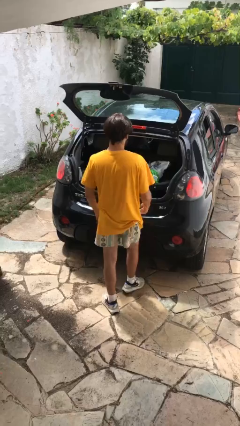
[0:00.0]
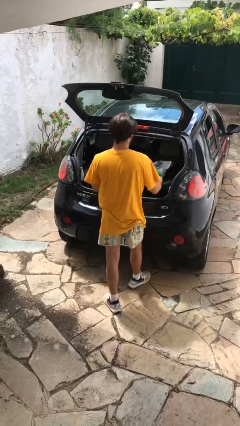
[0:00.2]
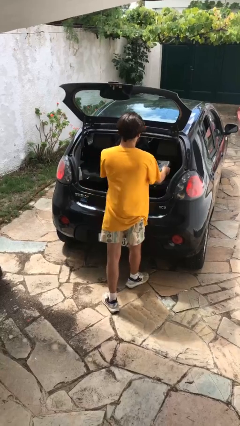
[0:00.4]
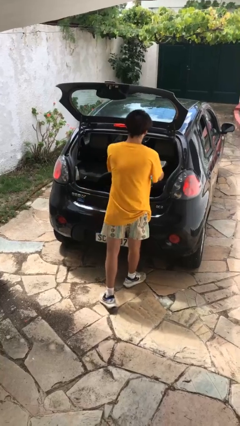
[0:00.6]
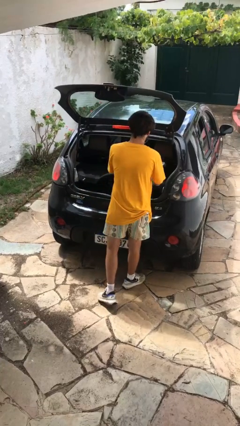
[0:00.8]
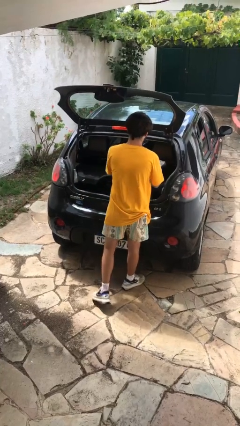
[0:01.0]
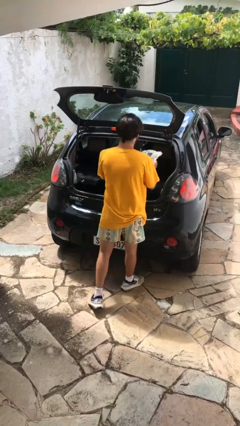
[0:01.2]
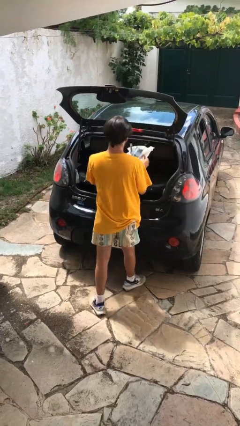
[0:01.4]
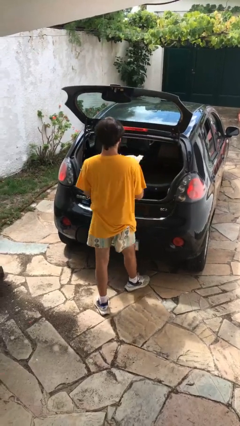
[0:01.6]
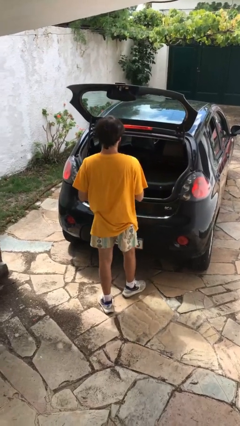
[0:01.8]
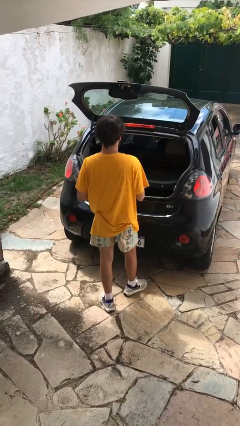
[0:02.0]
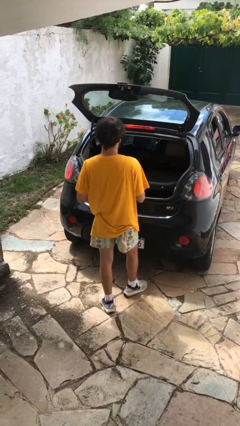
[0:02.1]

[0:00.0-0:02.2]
person unloads car

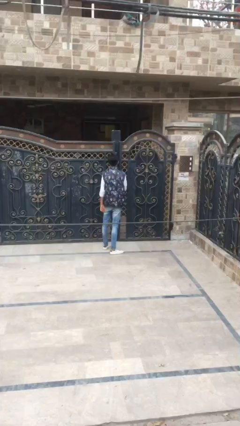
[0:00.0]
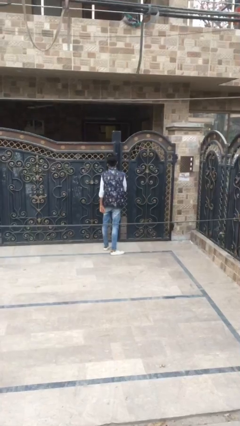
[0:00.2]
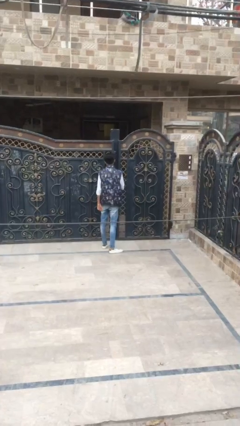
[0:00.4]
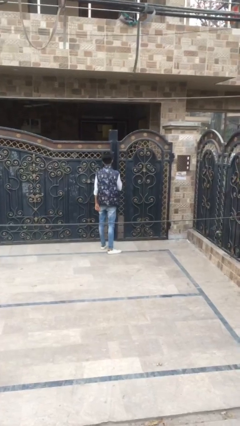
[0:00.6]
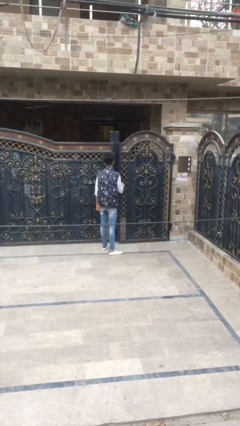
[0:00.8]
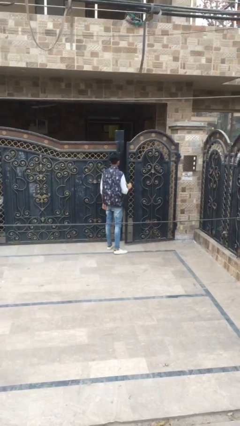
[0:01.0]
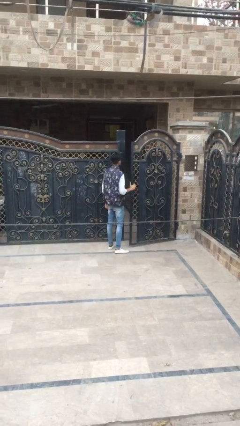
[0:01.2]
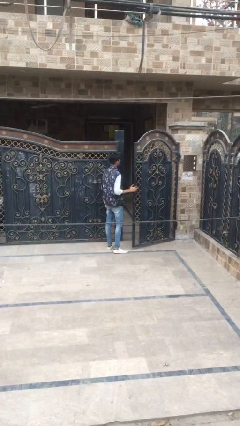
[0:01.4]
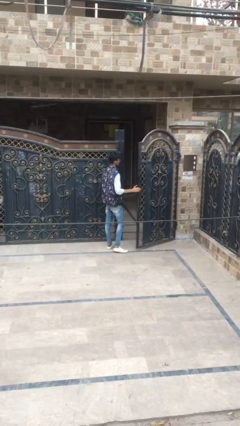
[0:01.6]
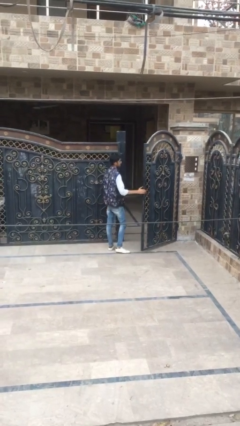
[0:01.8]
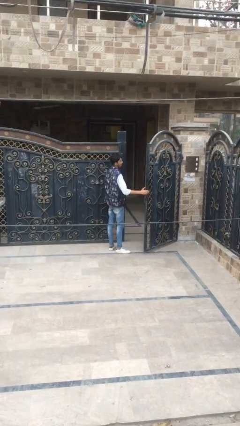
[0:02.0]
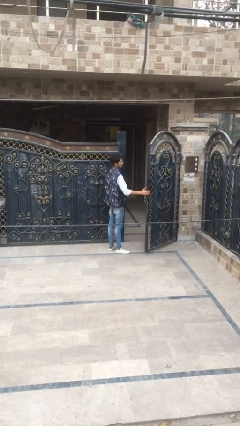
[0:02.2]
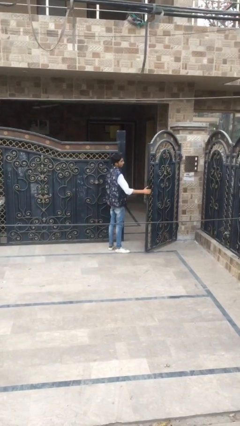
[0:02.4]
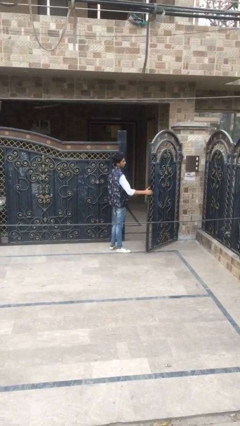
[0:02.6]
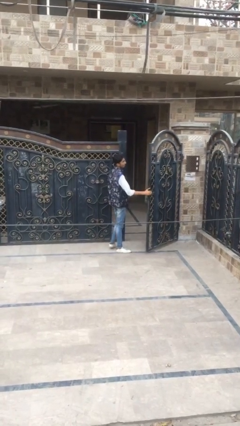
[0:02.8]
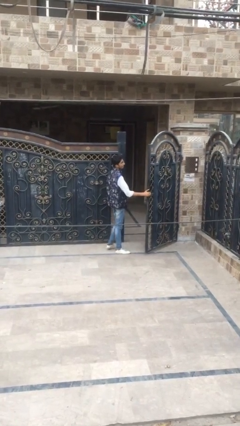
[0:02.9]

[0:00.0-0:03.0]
person opens facility door

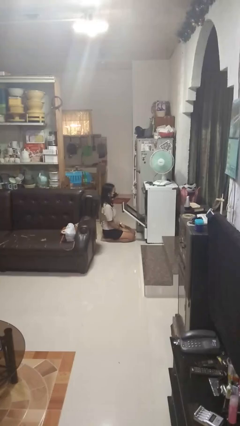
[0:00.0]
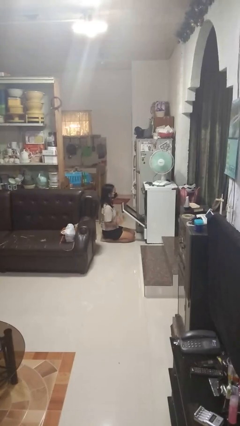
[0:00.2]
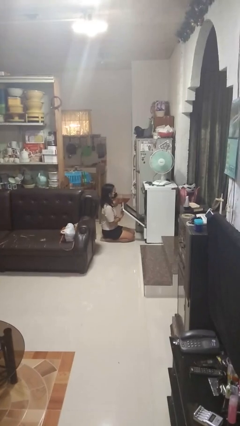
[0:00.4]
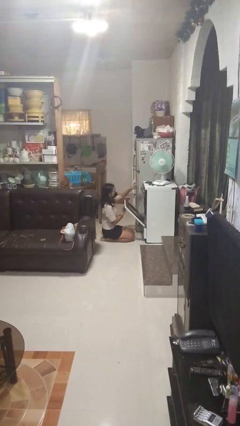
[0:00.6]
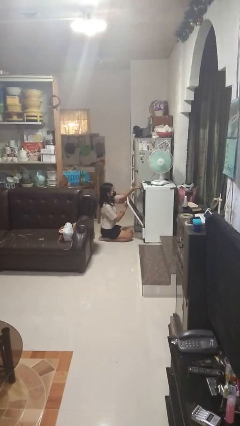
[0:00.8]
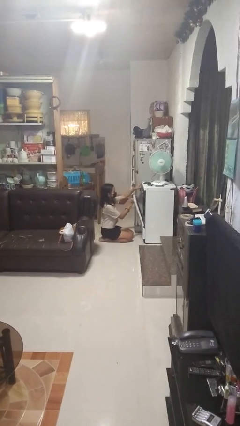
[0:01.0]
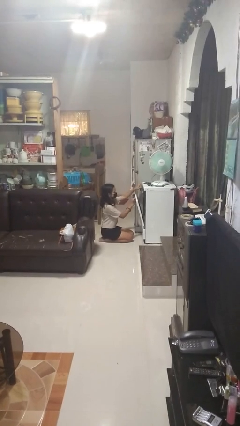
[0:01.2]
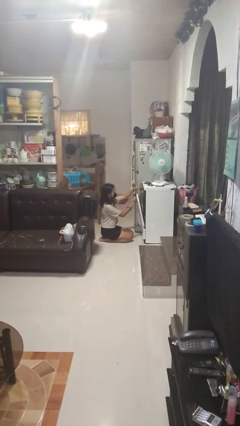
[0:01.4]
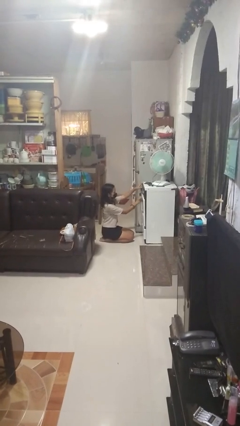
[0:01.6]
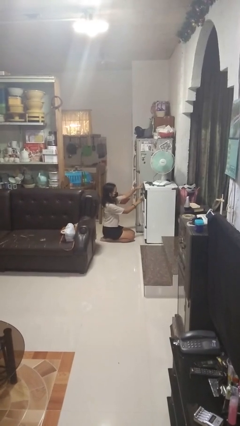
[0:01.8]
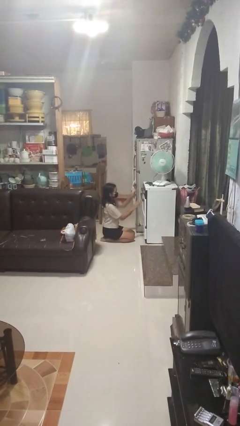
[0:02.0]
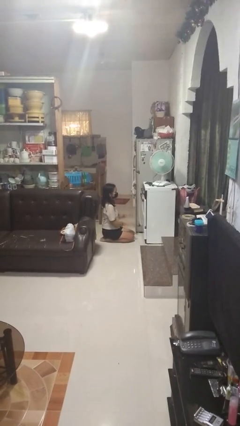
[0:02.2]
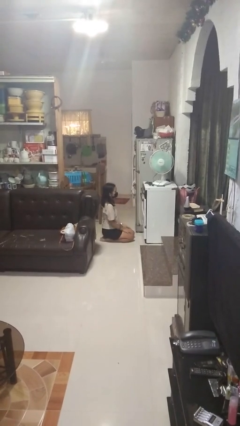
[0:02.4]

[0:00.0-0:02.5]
person closes oven door

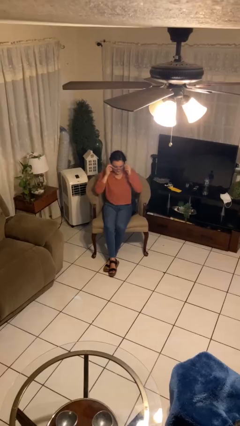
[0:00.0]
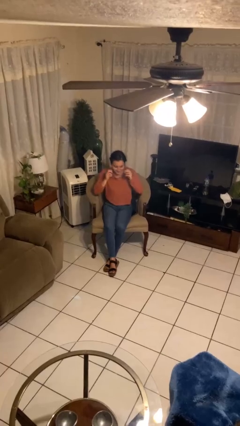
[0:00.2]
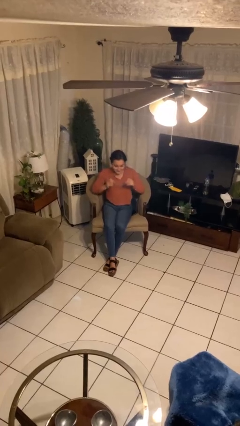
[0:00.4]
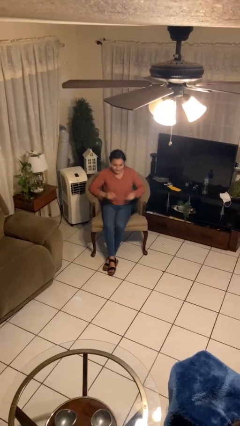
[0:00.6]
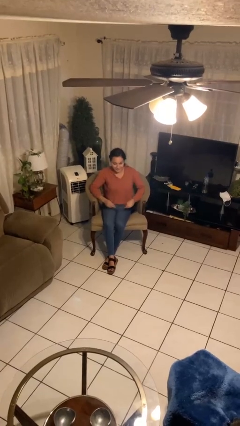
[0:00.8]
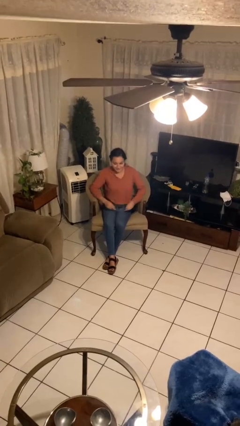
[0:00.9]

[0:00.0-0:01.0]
person takes off glasses

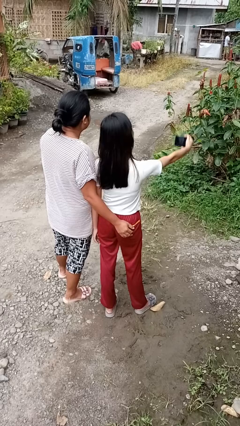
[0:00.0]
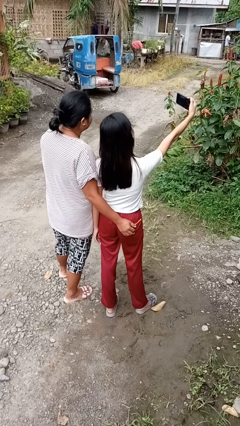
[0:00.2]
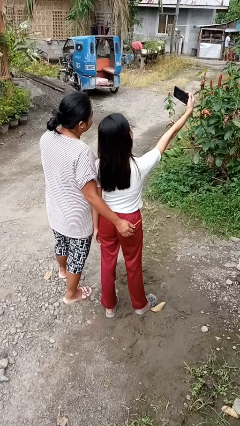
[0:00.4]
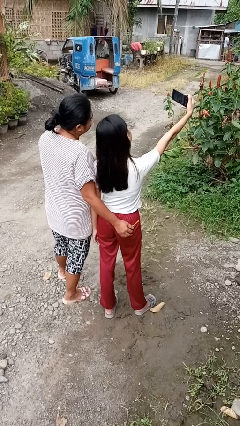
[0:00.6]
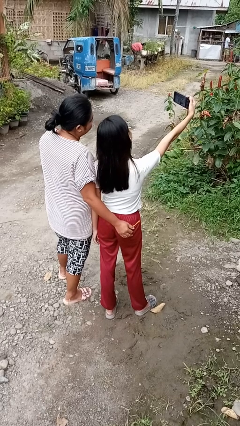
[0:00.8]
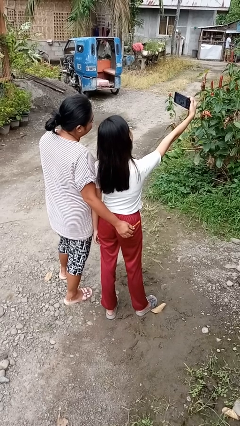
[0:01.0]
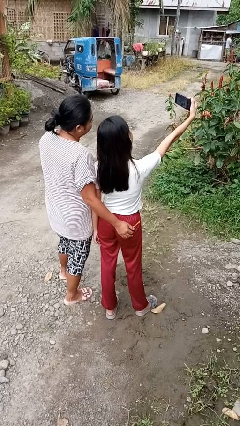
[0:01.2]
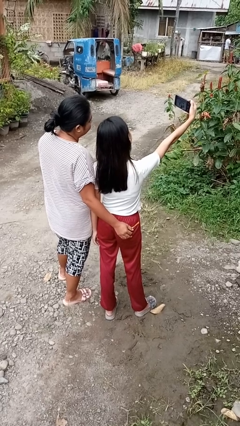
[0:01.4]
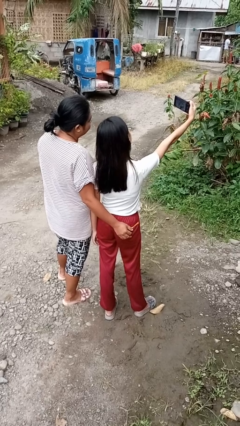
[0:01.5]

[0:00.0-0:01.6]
person takes selfie with person

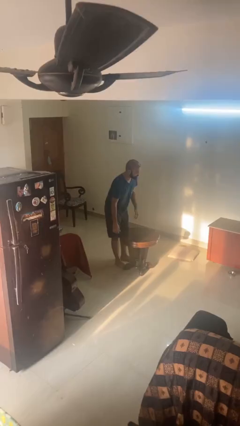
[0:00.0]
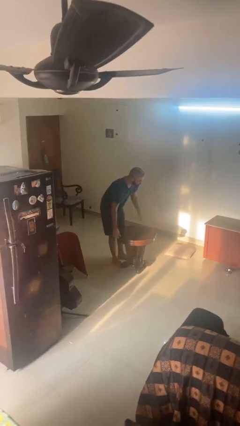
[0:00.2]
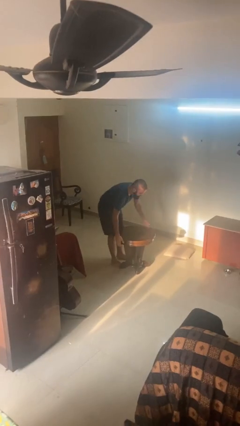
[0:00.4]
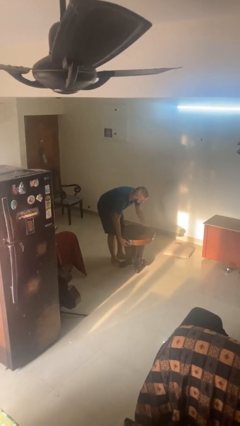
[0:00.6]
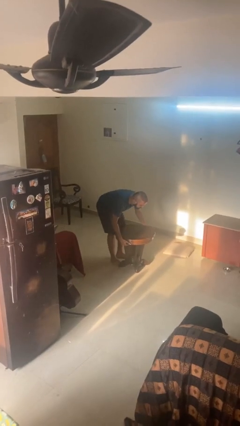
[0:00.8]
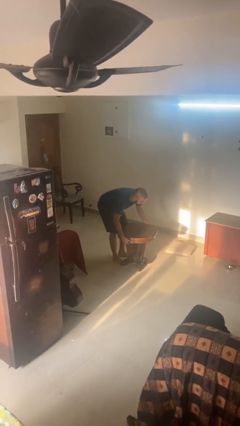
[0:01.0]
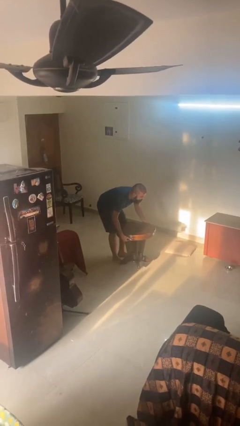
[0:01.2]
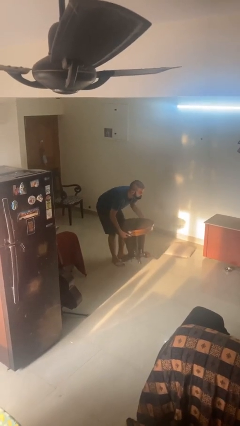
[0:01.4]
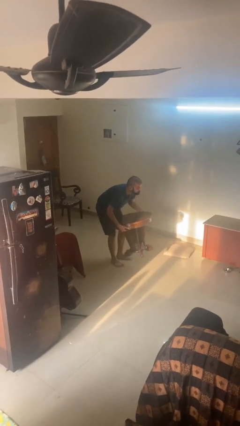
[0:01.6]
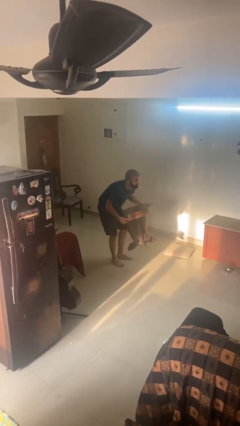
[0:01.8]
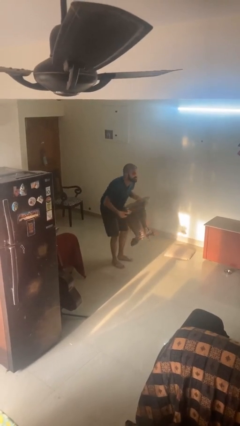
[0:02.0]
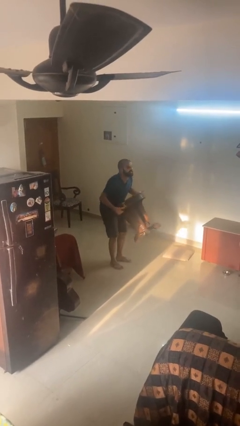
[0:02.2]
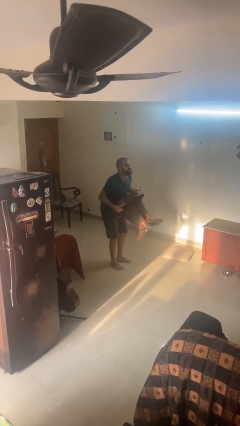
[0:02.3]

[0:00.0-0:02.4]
person picks up object from floor

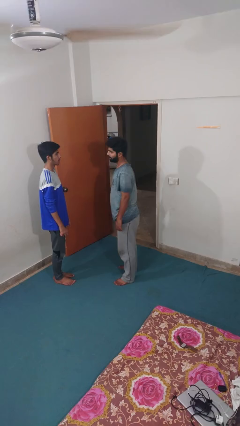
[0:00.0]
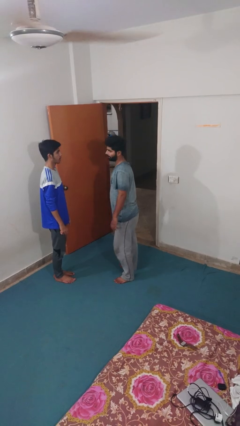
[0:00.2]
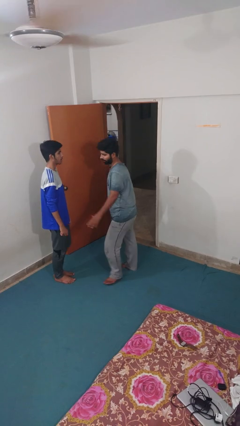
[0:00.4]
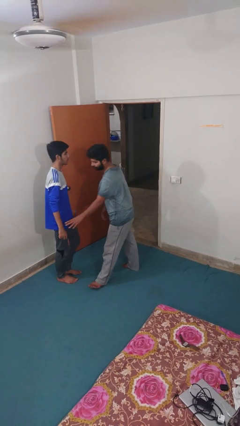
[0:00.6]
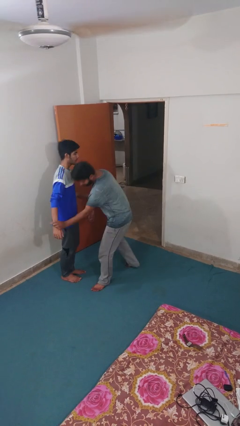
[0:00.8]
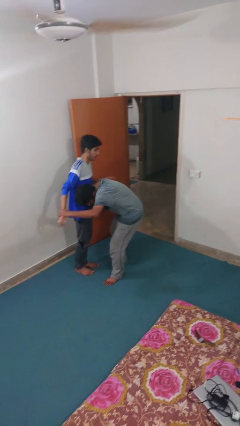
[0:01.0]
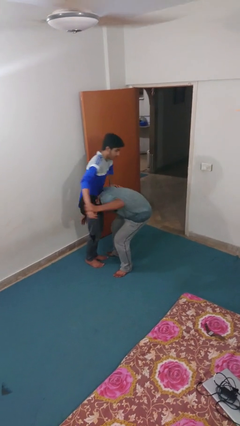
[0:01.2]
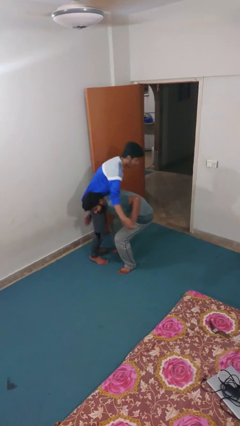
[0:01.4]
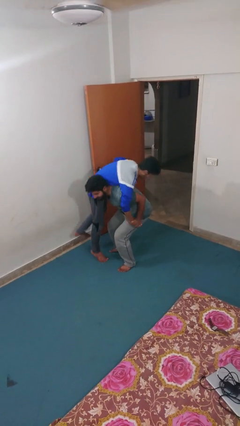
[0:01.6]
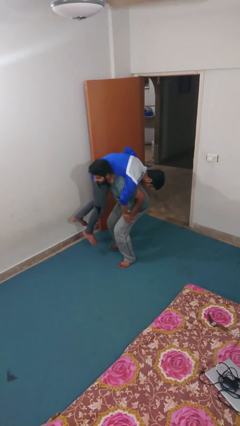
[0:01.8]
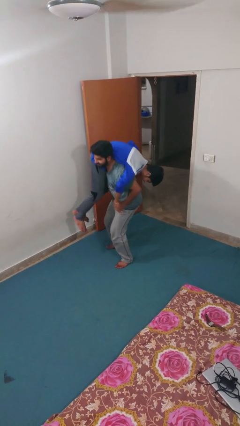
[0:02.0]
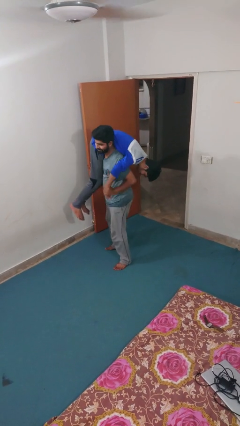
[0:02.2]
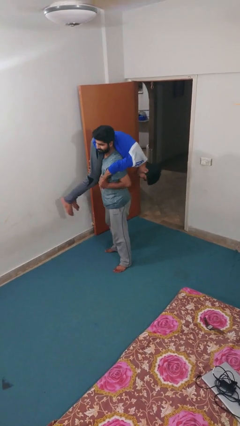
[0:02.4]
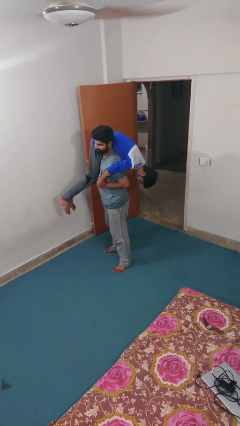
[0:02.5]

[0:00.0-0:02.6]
person carries person over shoulder

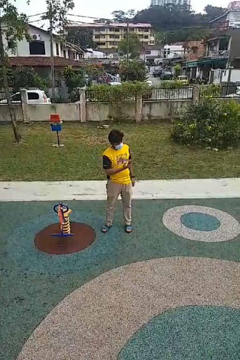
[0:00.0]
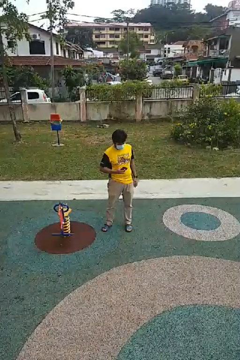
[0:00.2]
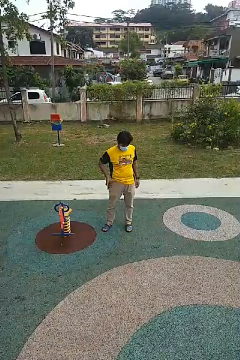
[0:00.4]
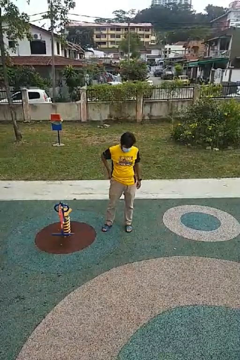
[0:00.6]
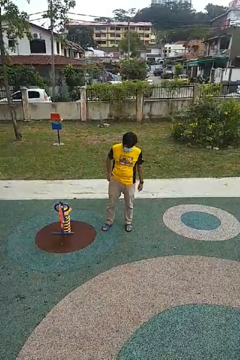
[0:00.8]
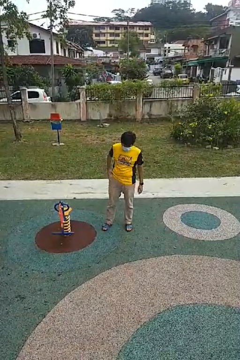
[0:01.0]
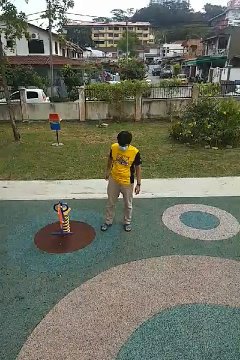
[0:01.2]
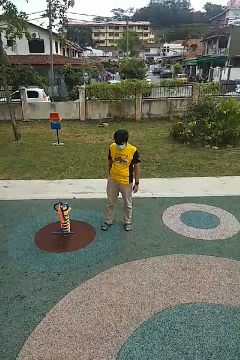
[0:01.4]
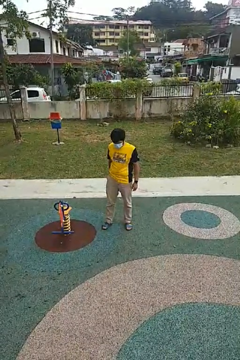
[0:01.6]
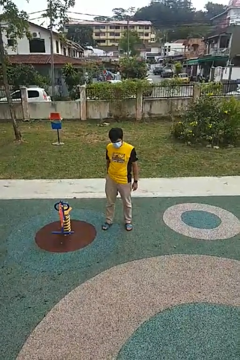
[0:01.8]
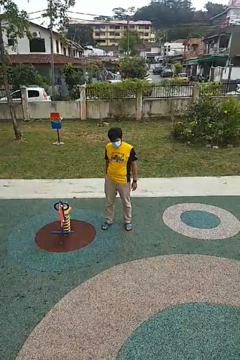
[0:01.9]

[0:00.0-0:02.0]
person puts phone into pocket
